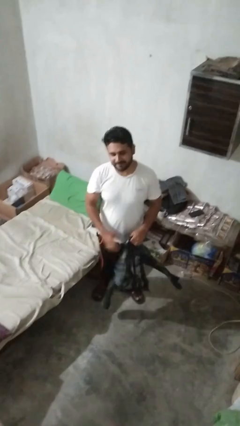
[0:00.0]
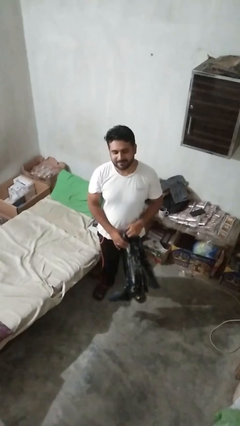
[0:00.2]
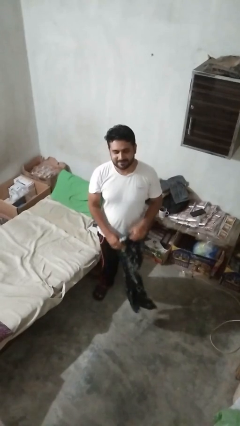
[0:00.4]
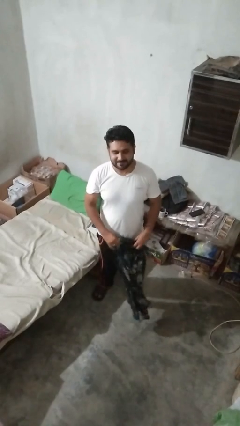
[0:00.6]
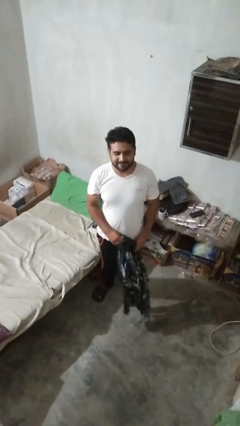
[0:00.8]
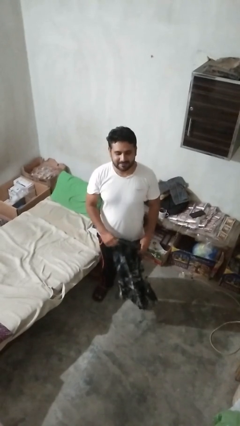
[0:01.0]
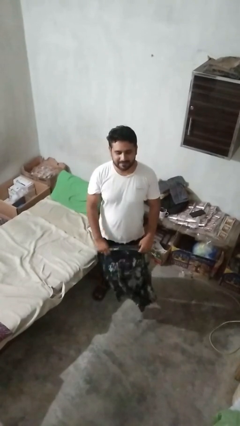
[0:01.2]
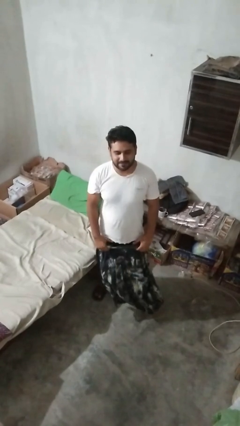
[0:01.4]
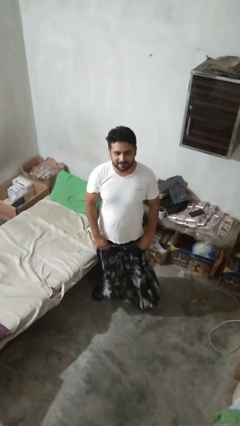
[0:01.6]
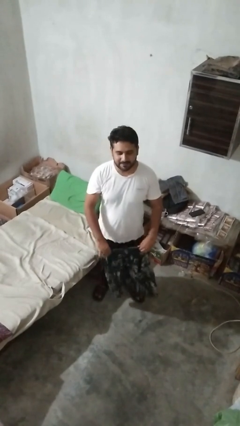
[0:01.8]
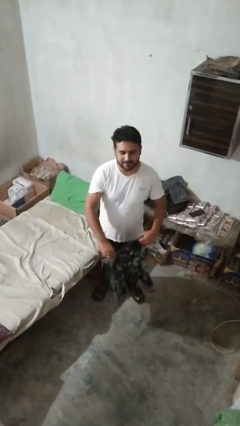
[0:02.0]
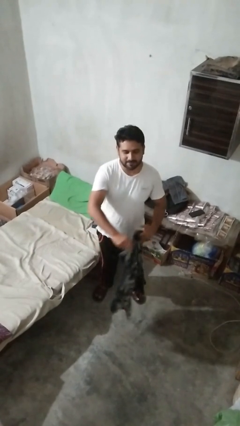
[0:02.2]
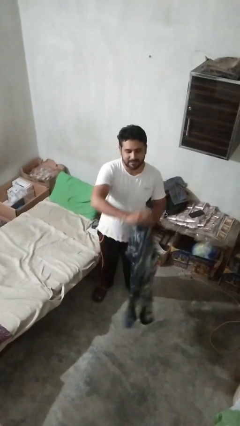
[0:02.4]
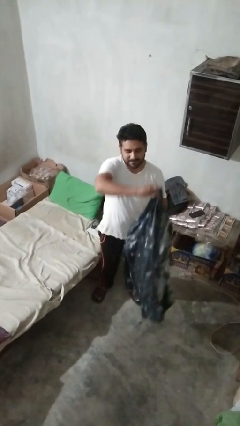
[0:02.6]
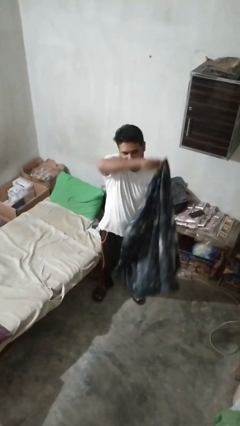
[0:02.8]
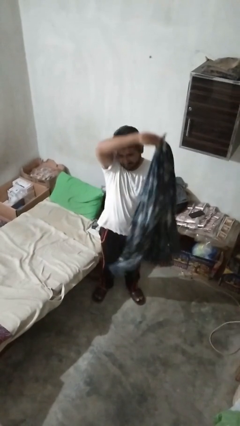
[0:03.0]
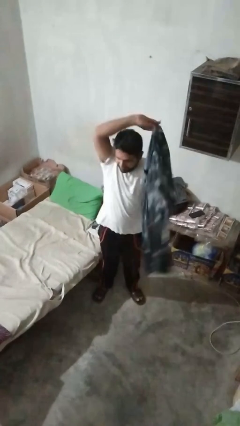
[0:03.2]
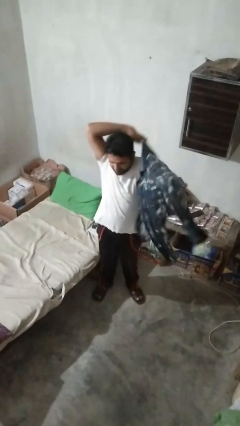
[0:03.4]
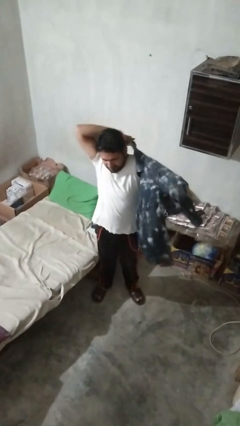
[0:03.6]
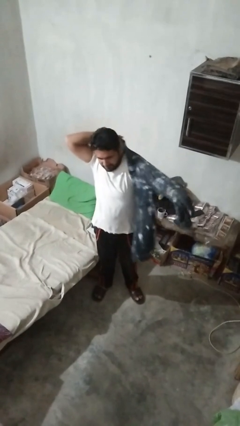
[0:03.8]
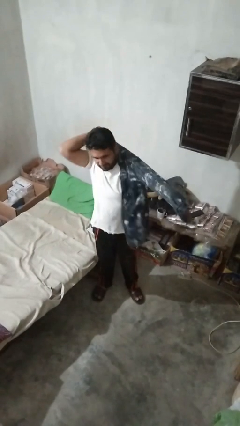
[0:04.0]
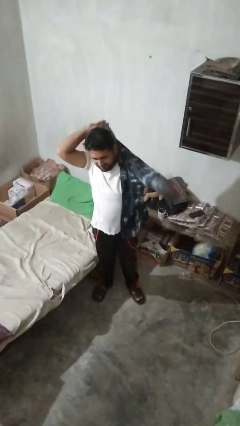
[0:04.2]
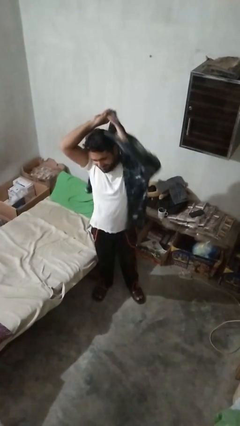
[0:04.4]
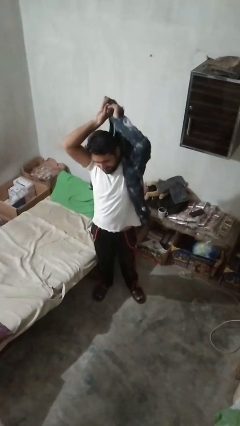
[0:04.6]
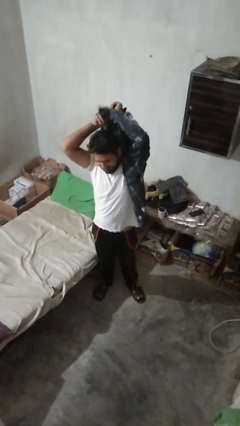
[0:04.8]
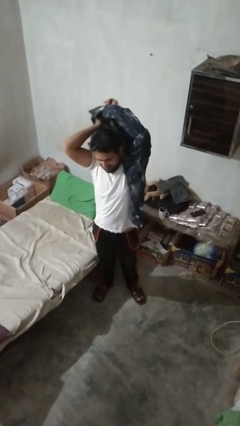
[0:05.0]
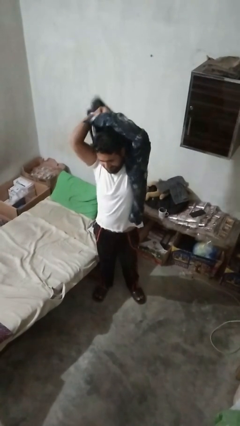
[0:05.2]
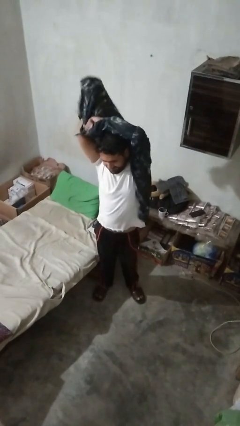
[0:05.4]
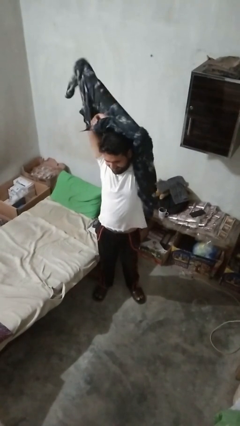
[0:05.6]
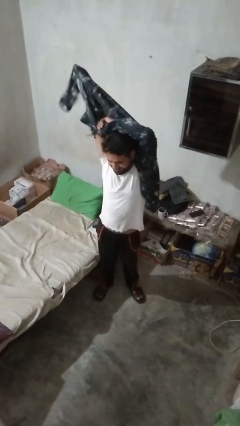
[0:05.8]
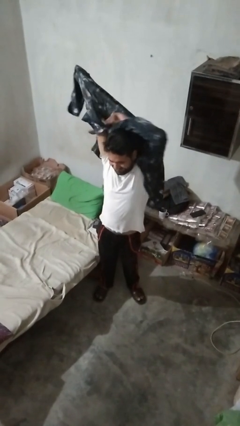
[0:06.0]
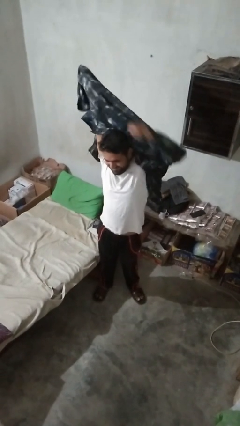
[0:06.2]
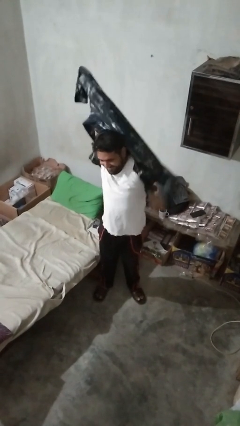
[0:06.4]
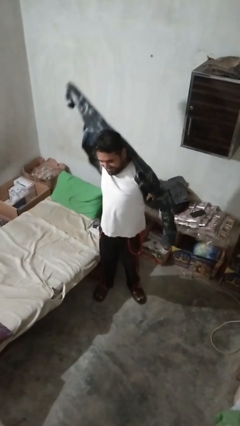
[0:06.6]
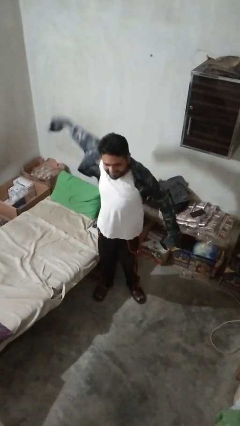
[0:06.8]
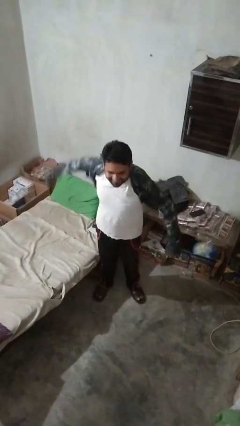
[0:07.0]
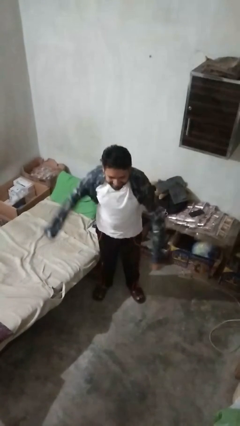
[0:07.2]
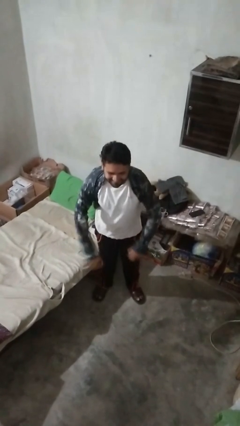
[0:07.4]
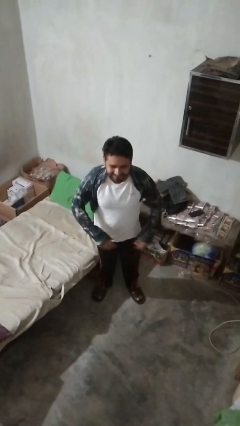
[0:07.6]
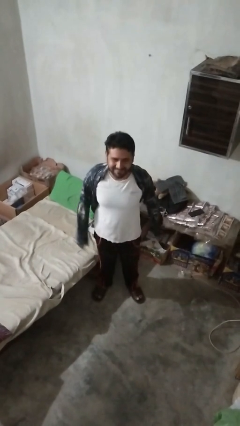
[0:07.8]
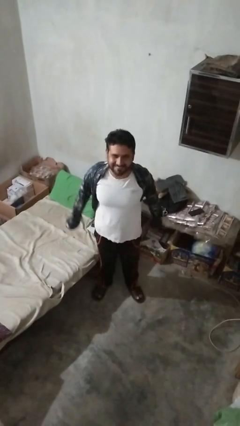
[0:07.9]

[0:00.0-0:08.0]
person puts on shirt

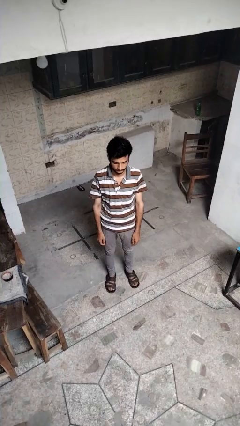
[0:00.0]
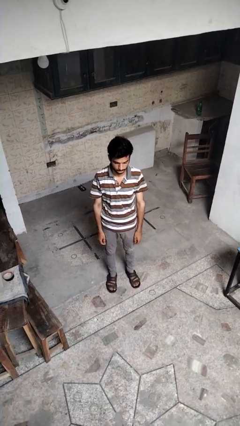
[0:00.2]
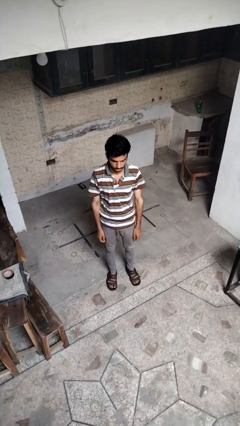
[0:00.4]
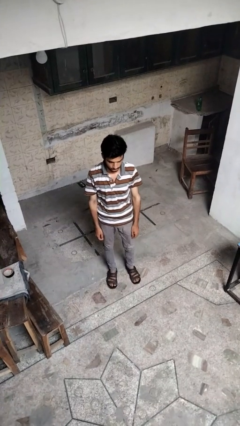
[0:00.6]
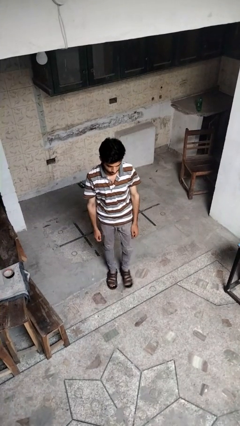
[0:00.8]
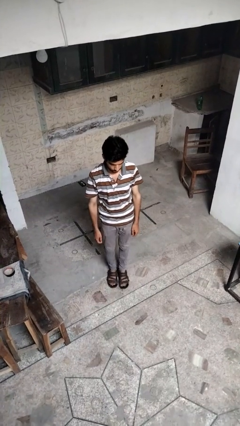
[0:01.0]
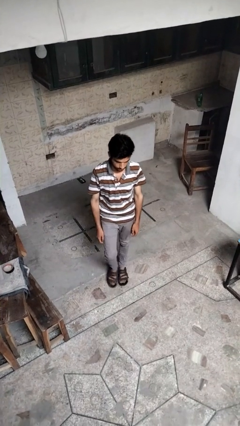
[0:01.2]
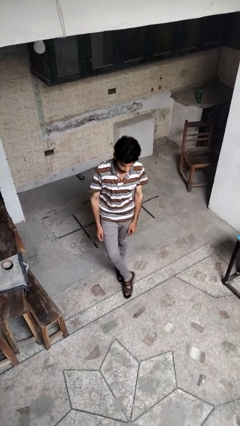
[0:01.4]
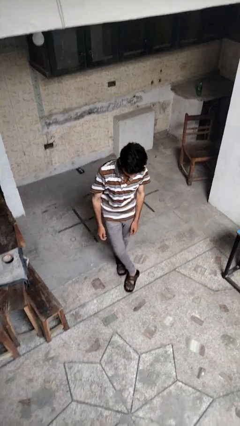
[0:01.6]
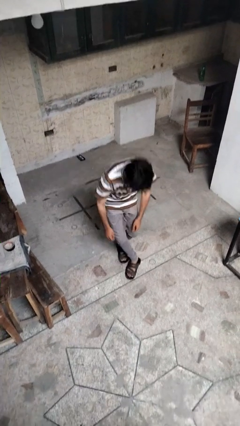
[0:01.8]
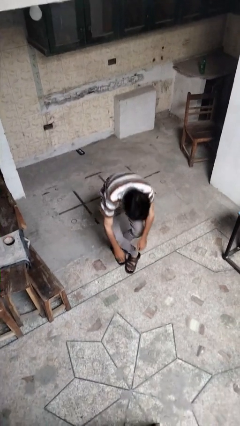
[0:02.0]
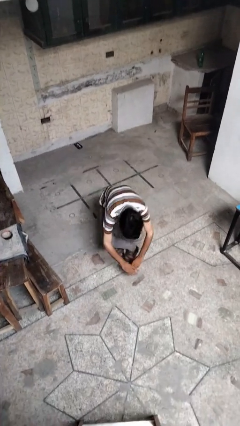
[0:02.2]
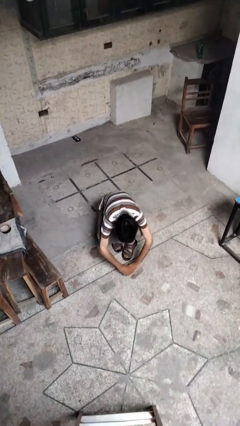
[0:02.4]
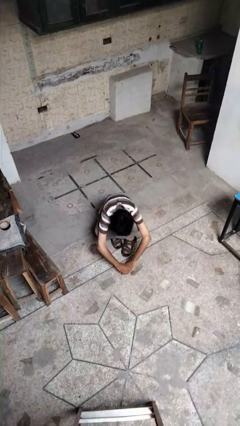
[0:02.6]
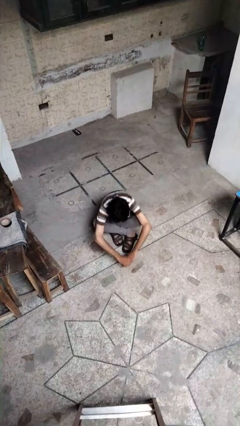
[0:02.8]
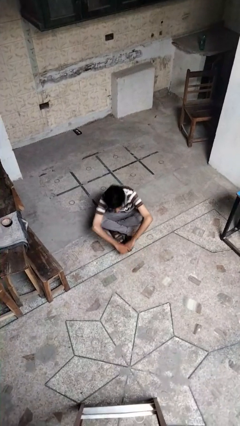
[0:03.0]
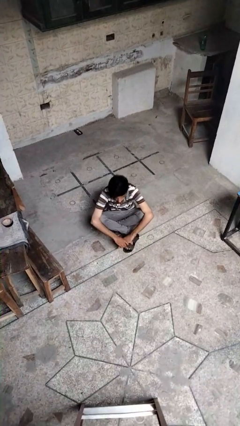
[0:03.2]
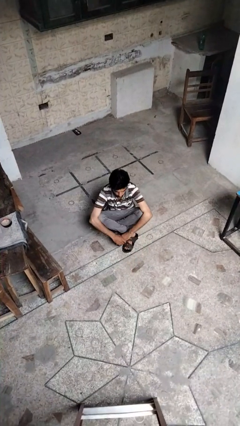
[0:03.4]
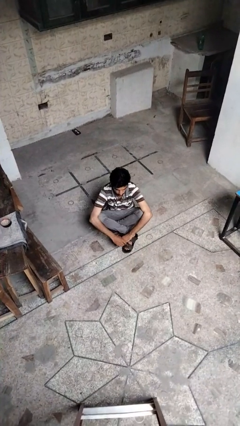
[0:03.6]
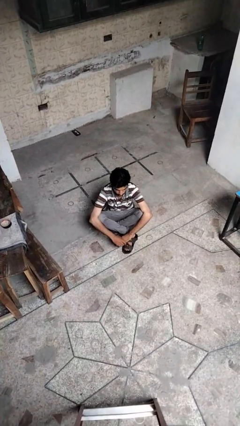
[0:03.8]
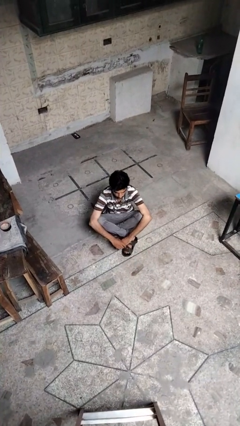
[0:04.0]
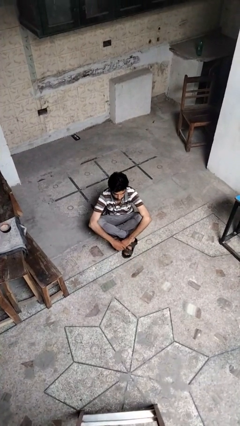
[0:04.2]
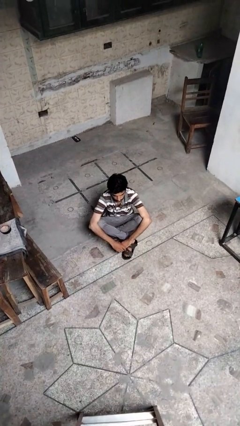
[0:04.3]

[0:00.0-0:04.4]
person sits crisscross

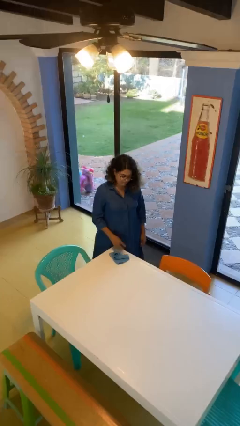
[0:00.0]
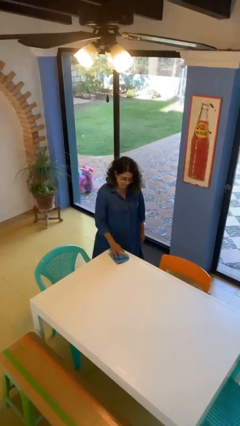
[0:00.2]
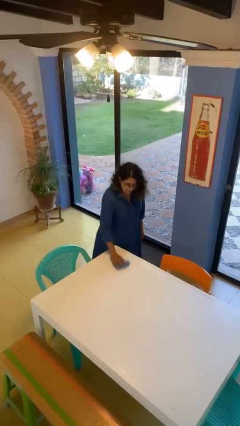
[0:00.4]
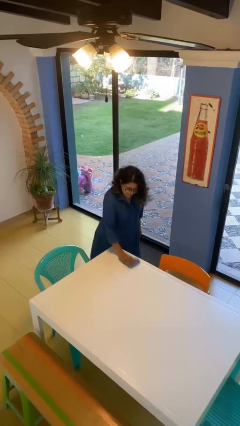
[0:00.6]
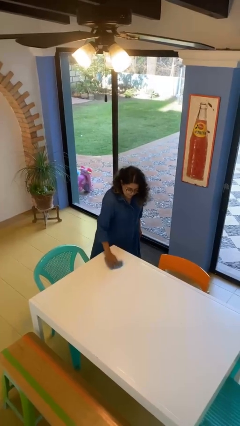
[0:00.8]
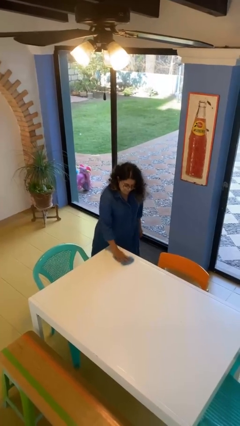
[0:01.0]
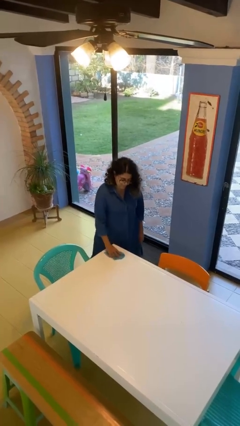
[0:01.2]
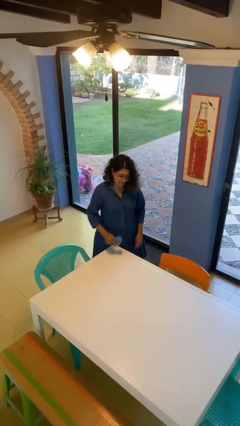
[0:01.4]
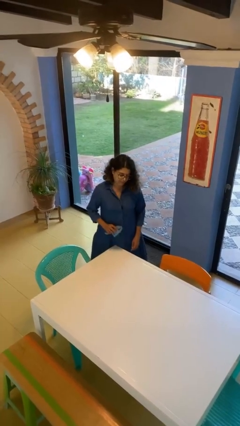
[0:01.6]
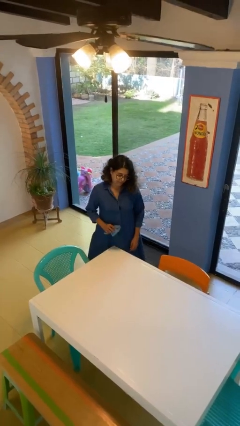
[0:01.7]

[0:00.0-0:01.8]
person cleans table with rag

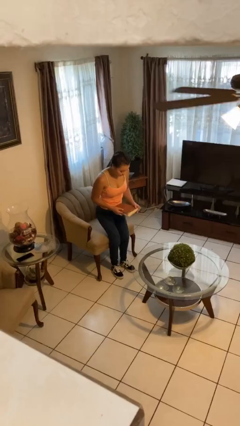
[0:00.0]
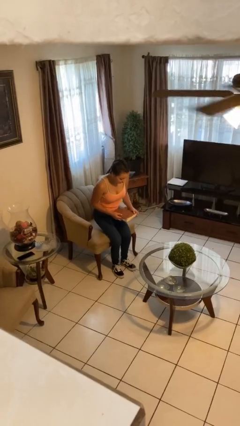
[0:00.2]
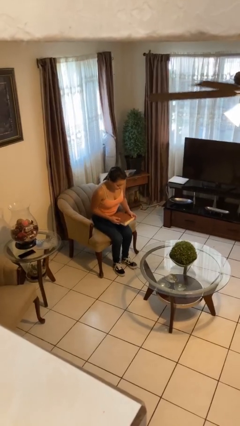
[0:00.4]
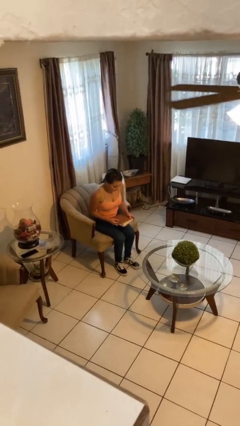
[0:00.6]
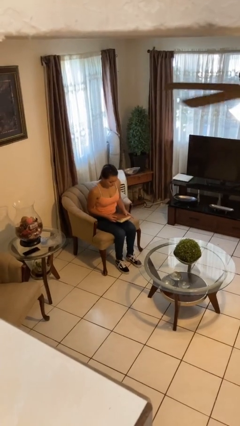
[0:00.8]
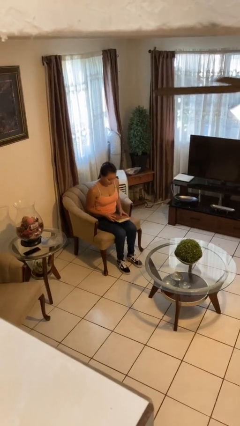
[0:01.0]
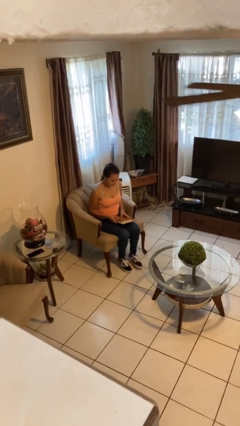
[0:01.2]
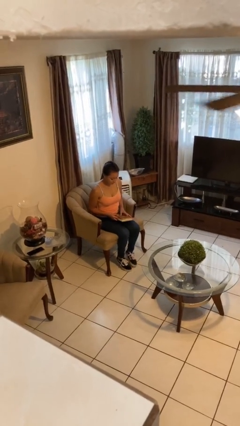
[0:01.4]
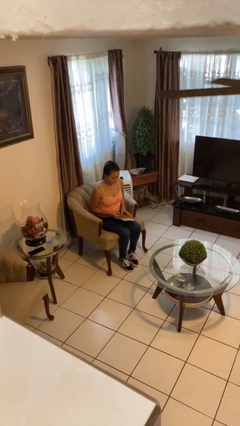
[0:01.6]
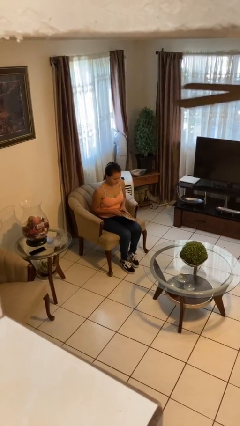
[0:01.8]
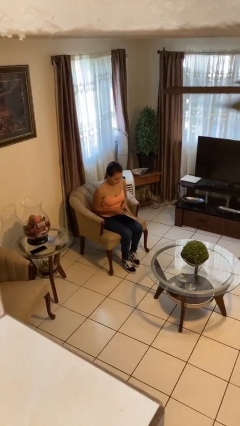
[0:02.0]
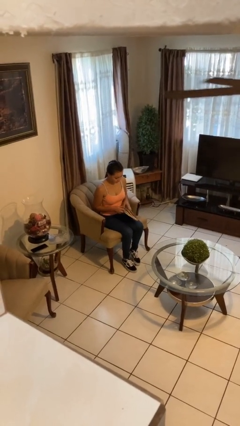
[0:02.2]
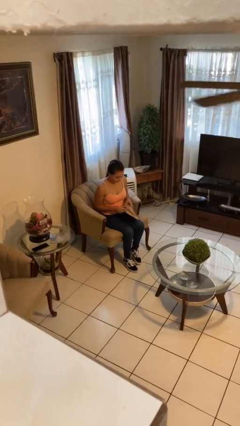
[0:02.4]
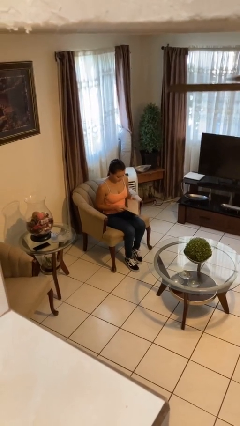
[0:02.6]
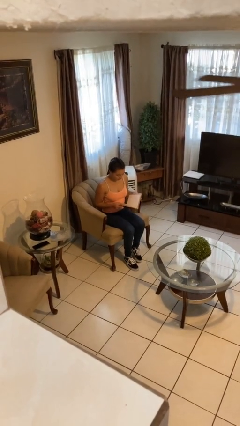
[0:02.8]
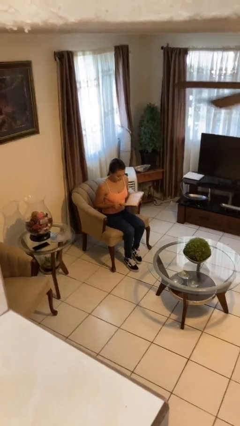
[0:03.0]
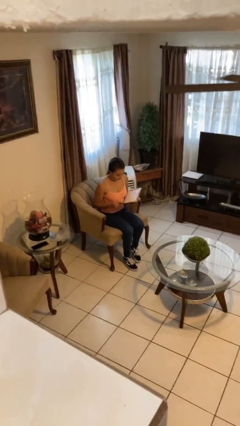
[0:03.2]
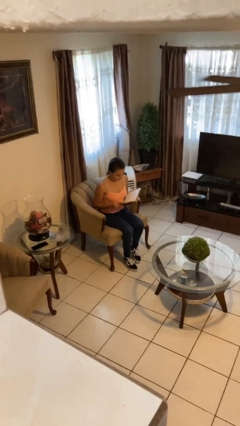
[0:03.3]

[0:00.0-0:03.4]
person sits down

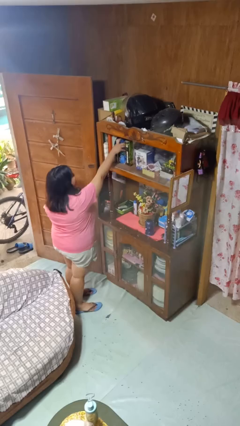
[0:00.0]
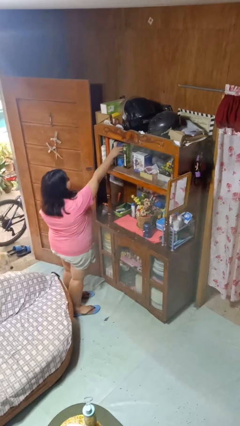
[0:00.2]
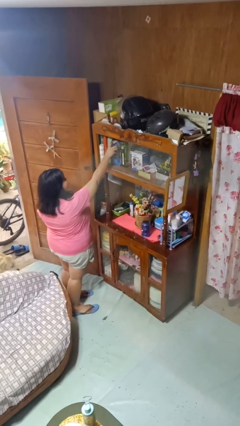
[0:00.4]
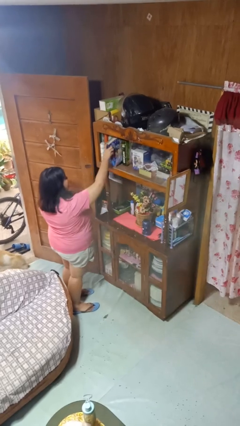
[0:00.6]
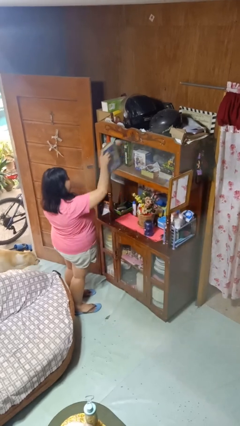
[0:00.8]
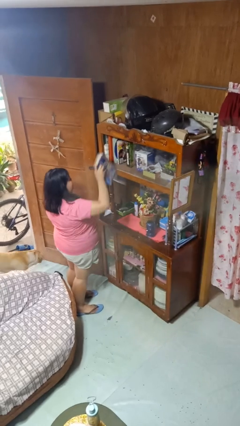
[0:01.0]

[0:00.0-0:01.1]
person picks up object from shelf
